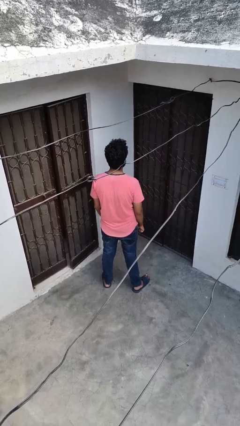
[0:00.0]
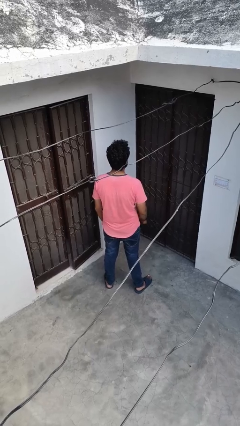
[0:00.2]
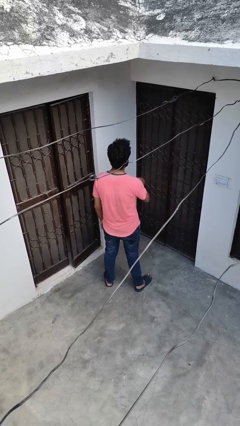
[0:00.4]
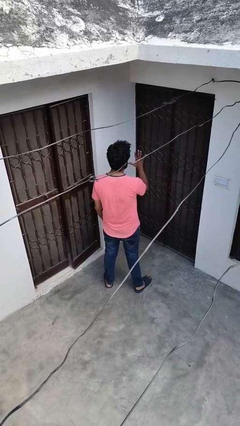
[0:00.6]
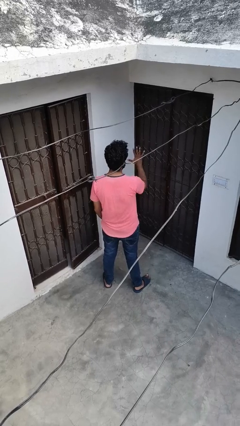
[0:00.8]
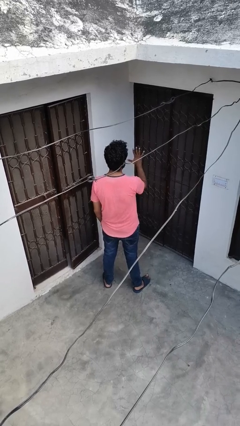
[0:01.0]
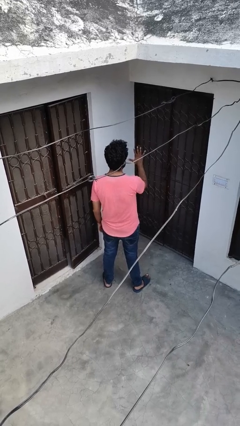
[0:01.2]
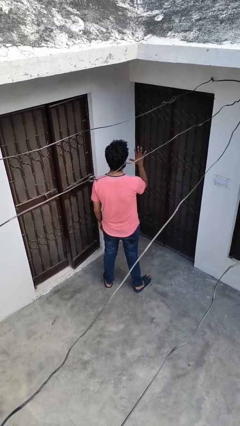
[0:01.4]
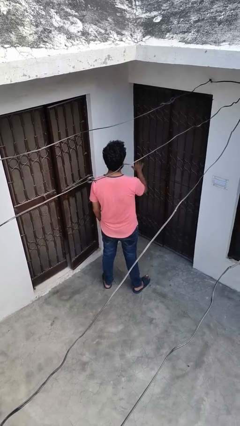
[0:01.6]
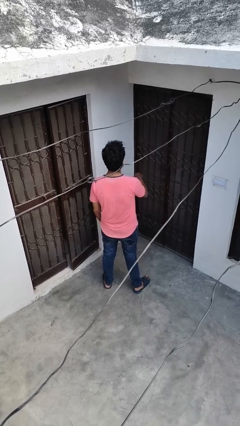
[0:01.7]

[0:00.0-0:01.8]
person gestures number five

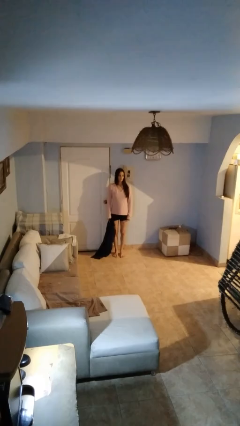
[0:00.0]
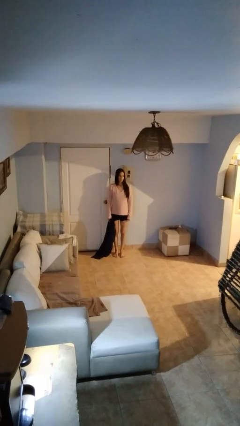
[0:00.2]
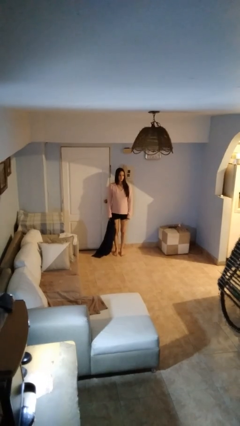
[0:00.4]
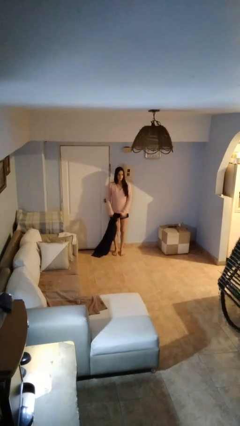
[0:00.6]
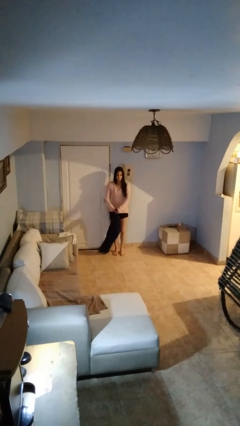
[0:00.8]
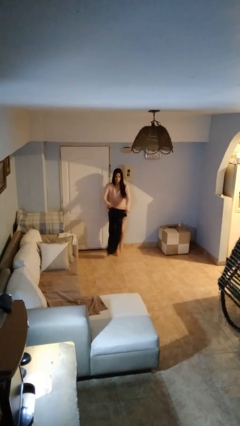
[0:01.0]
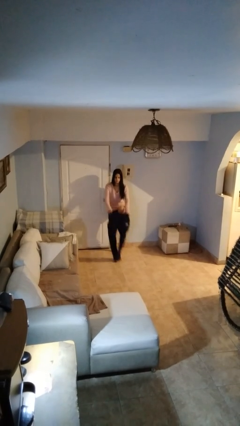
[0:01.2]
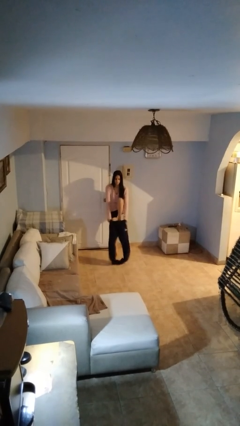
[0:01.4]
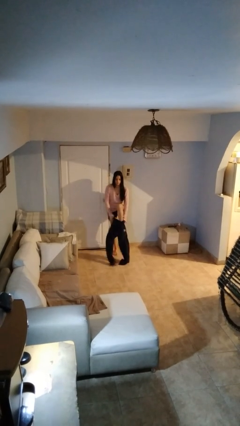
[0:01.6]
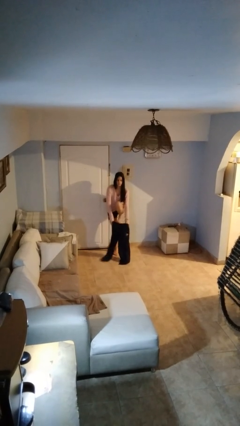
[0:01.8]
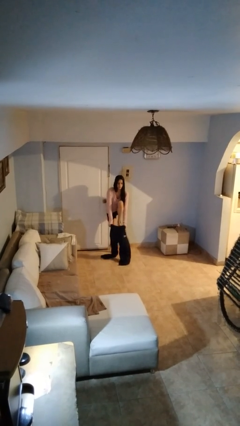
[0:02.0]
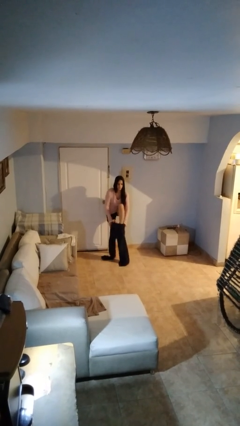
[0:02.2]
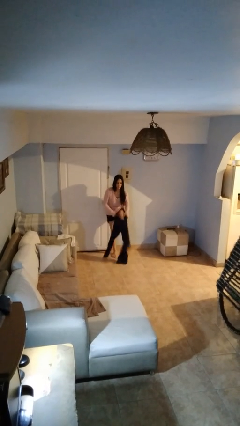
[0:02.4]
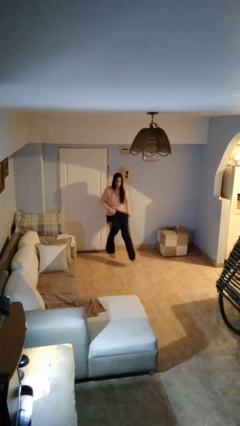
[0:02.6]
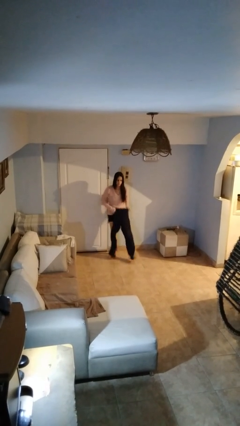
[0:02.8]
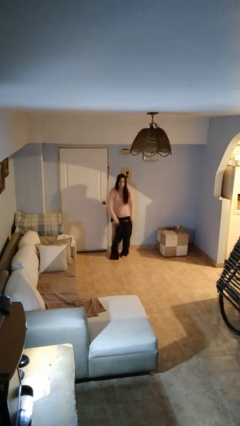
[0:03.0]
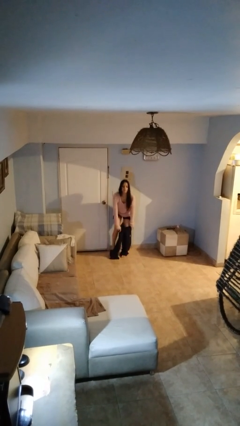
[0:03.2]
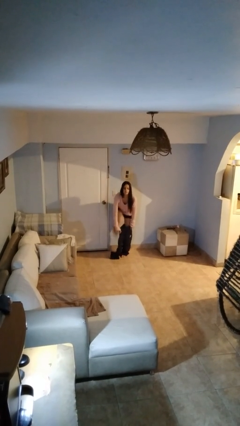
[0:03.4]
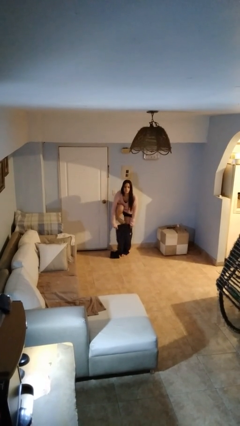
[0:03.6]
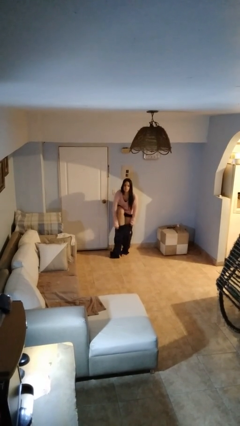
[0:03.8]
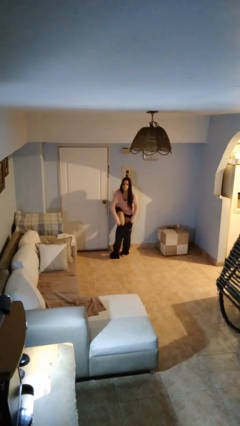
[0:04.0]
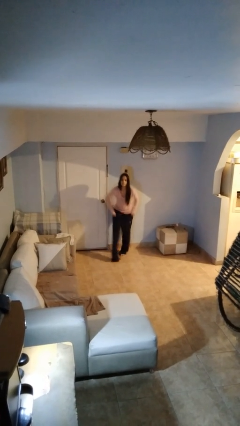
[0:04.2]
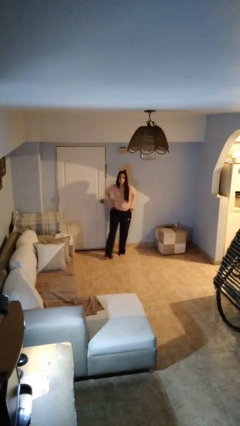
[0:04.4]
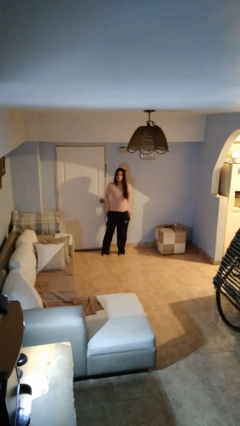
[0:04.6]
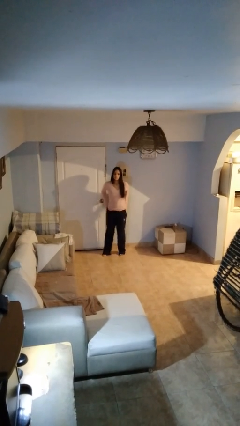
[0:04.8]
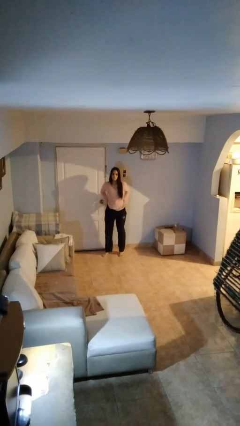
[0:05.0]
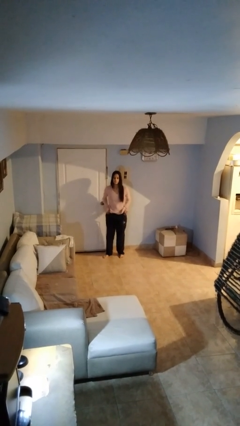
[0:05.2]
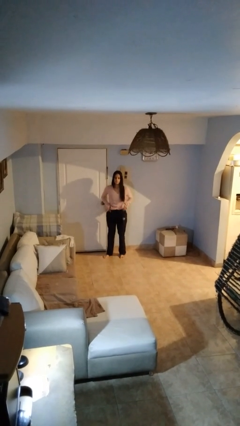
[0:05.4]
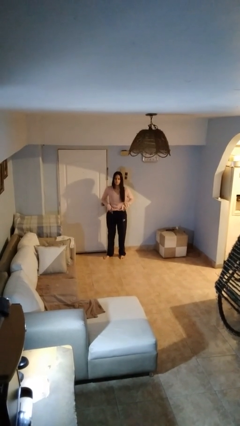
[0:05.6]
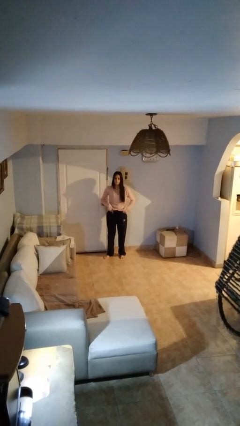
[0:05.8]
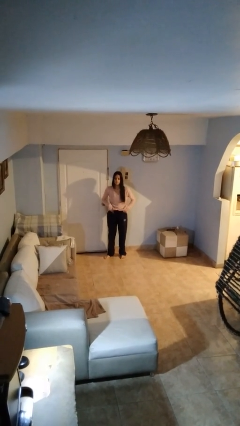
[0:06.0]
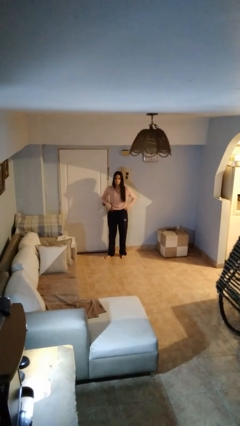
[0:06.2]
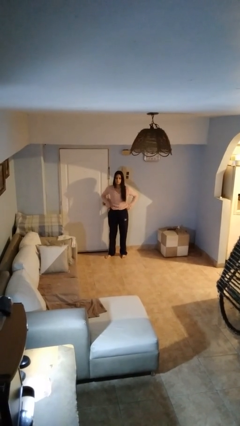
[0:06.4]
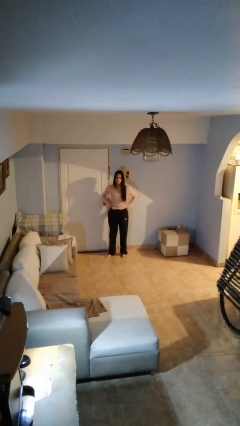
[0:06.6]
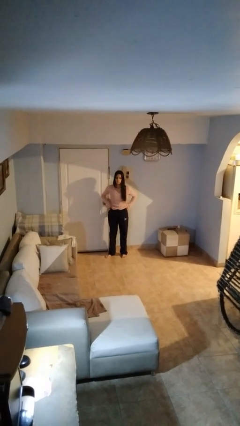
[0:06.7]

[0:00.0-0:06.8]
person takes off pants

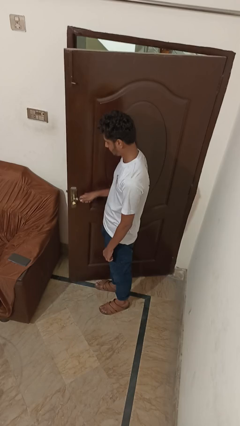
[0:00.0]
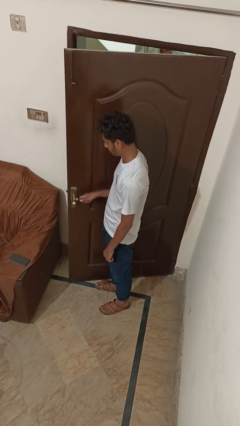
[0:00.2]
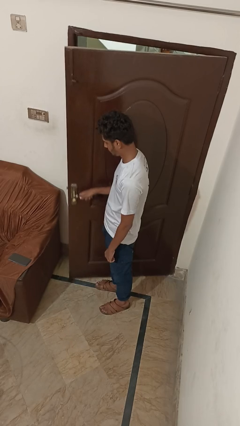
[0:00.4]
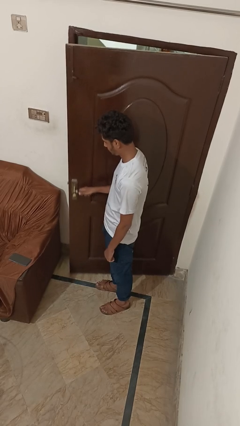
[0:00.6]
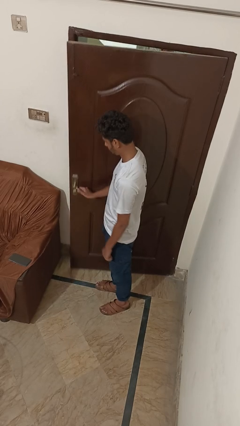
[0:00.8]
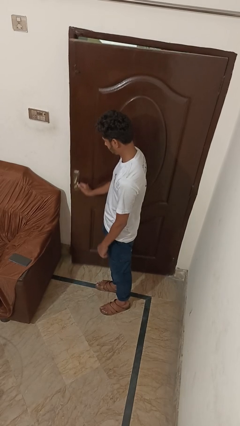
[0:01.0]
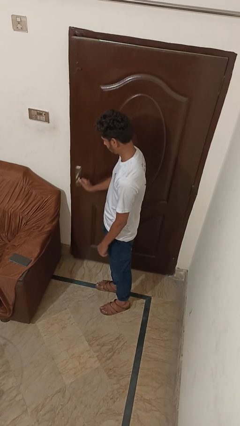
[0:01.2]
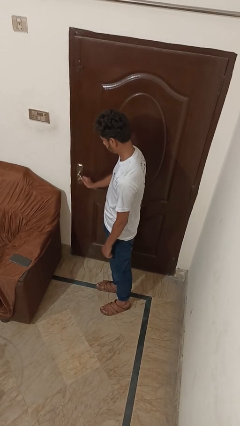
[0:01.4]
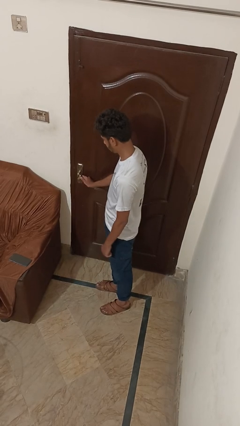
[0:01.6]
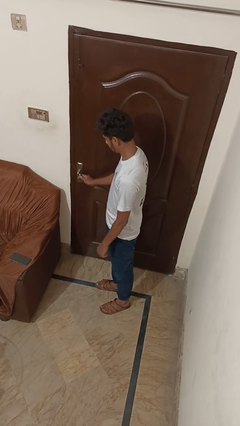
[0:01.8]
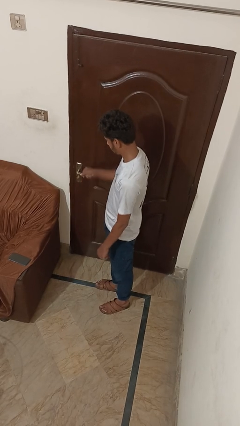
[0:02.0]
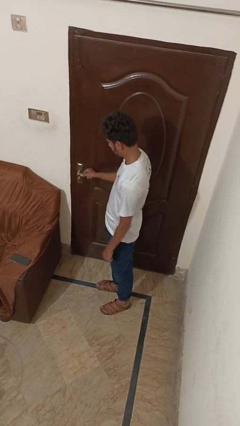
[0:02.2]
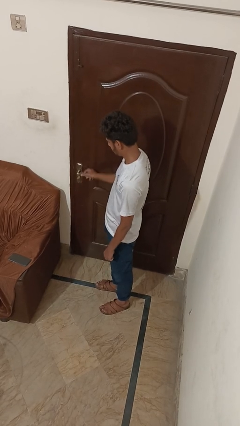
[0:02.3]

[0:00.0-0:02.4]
person closes facility door

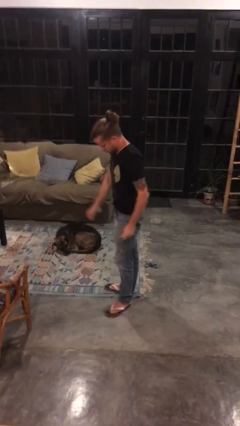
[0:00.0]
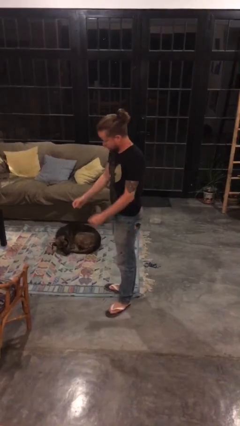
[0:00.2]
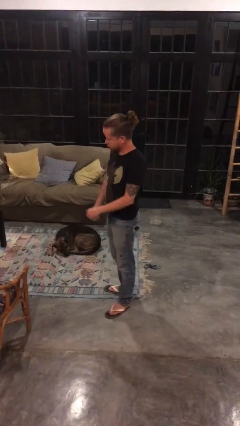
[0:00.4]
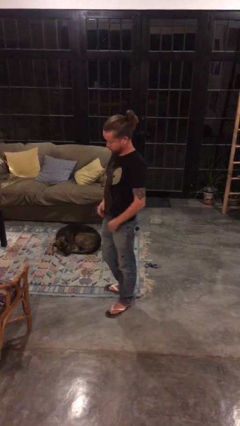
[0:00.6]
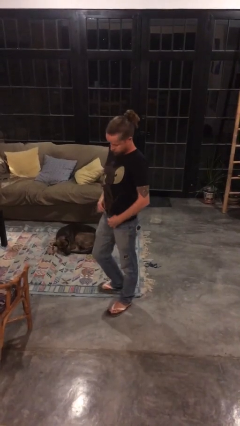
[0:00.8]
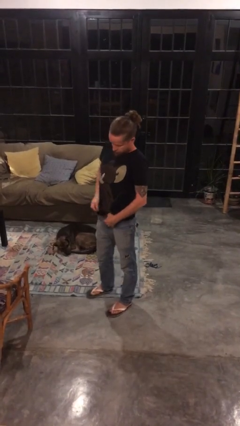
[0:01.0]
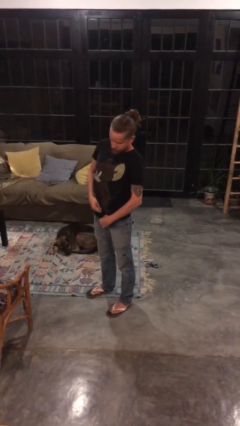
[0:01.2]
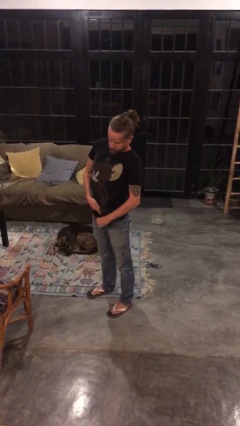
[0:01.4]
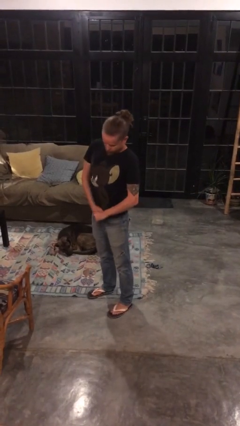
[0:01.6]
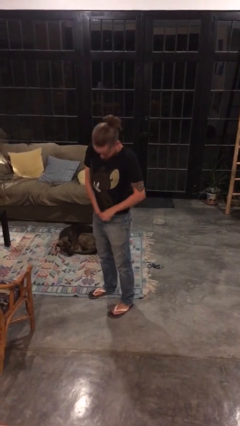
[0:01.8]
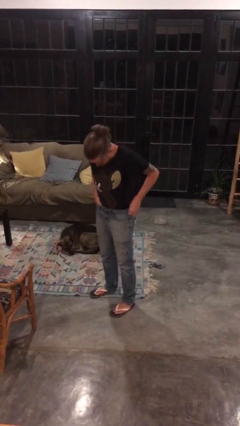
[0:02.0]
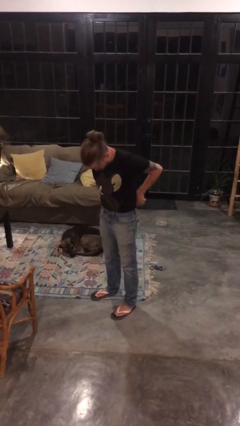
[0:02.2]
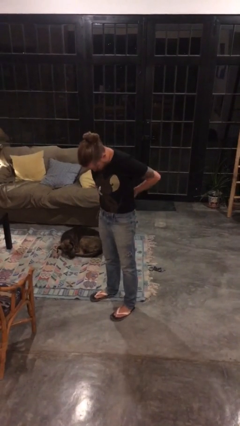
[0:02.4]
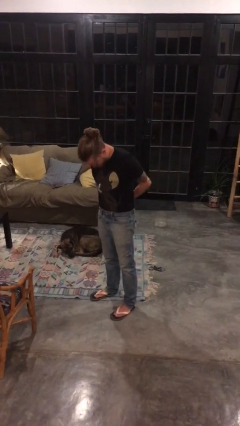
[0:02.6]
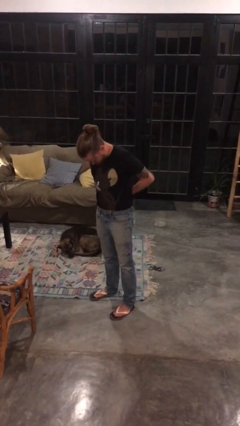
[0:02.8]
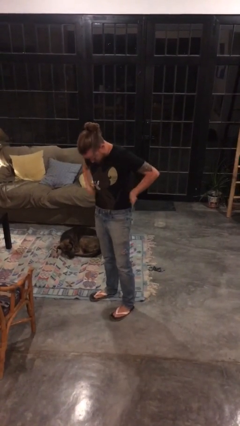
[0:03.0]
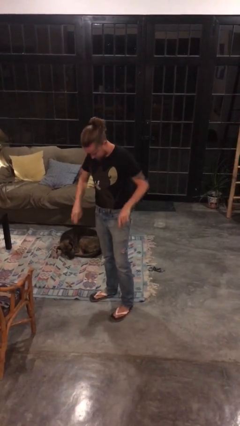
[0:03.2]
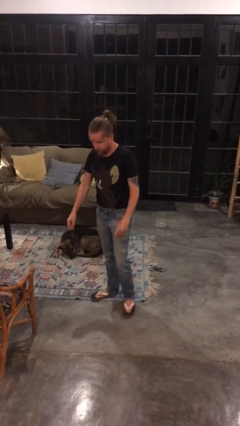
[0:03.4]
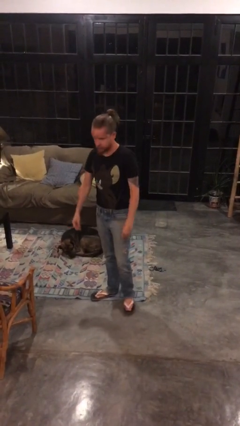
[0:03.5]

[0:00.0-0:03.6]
person tucks in shirt

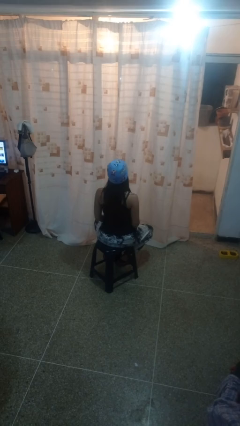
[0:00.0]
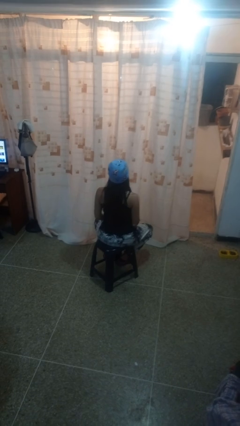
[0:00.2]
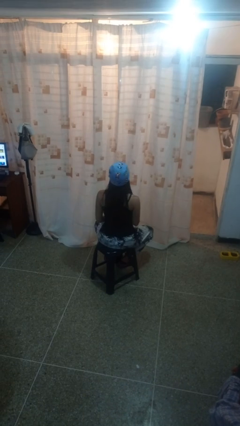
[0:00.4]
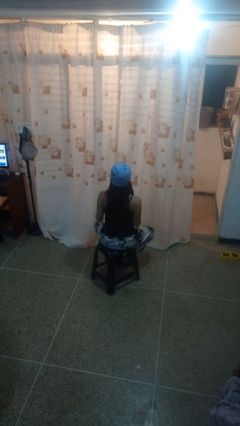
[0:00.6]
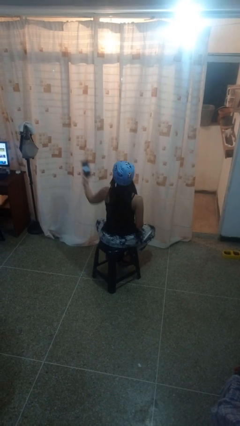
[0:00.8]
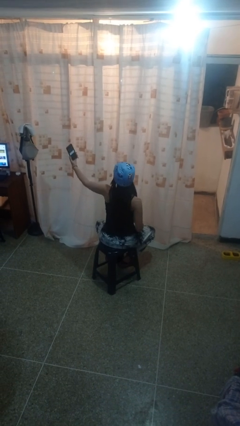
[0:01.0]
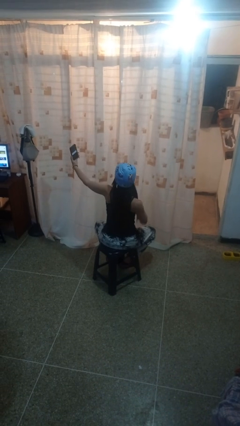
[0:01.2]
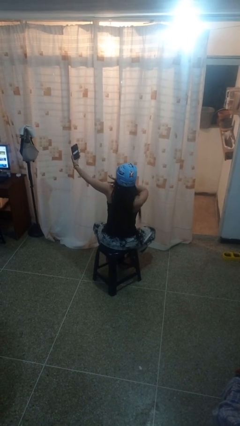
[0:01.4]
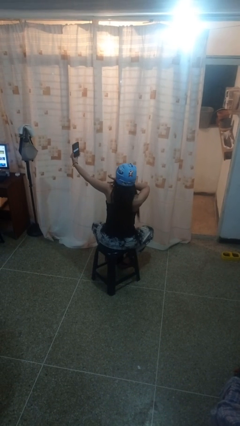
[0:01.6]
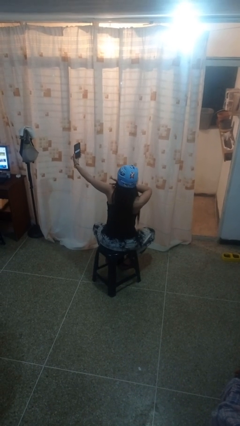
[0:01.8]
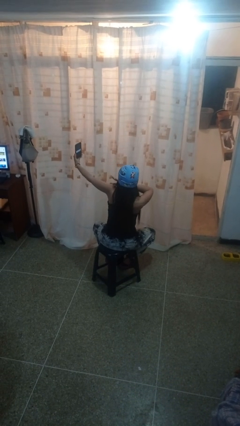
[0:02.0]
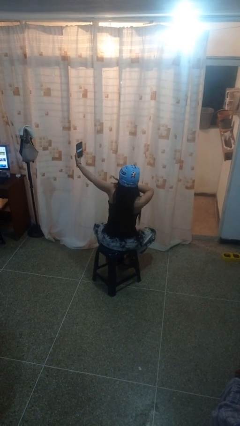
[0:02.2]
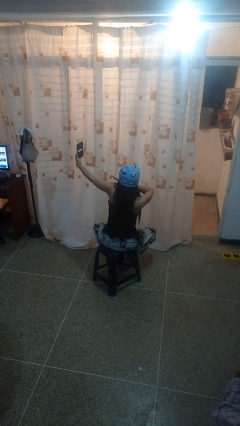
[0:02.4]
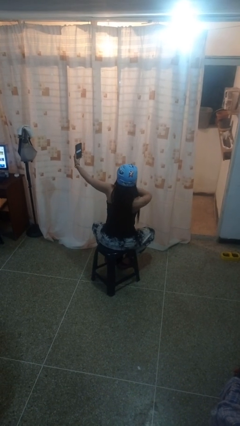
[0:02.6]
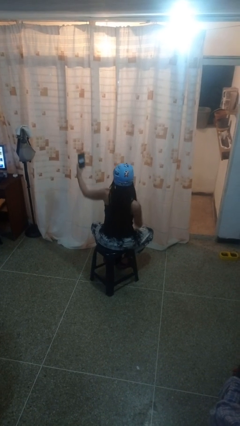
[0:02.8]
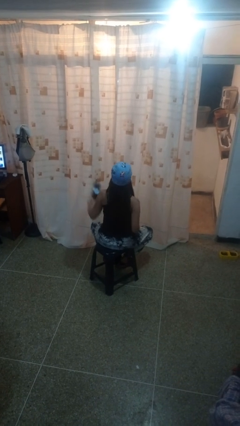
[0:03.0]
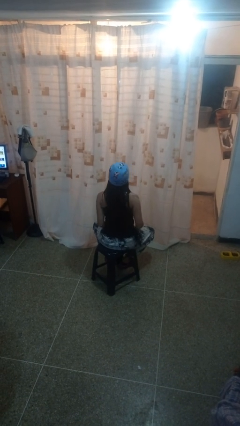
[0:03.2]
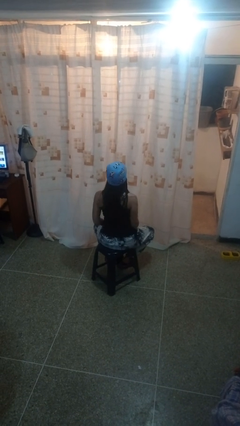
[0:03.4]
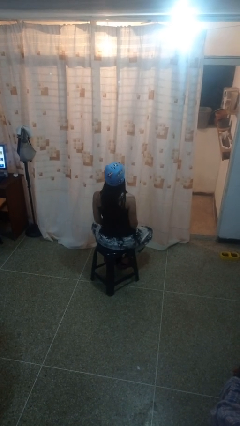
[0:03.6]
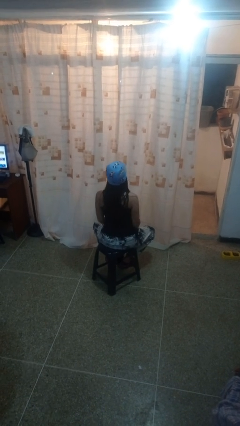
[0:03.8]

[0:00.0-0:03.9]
person takes selfie
